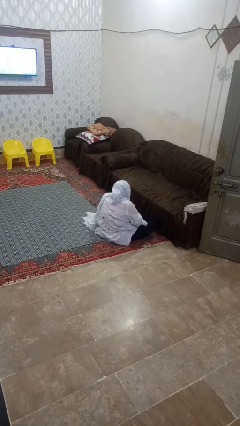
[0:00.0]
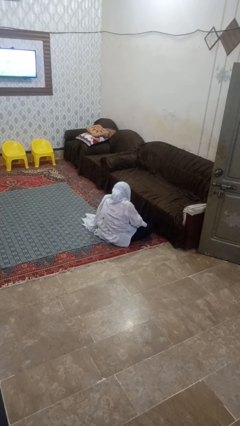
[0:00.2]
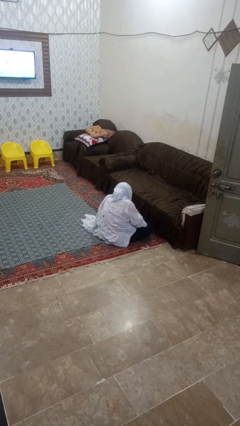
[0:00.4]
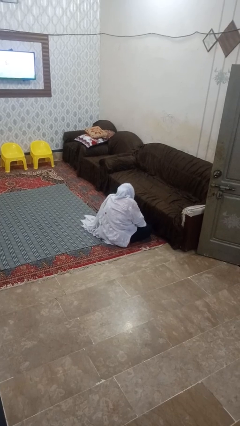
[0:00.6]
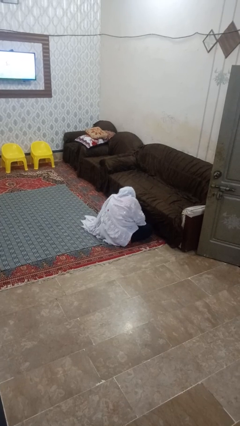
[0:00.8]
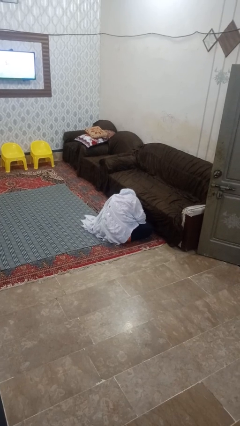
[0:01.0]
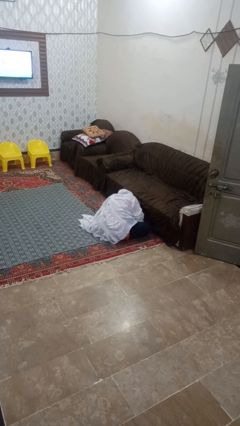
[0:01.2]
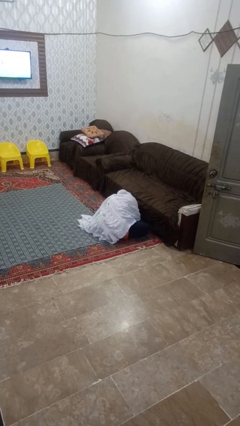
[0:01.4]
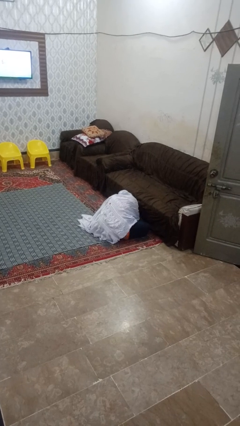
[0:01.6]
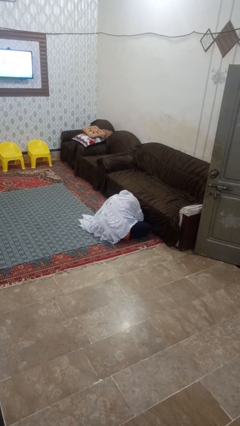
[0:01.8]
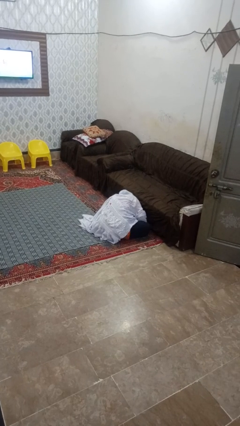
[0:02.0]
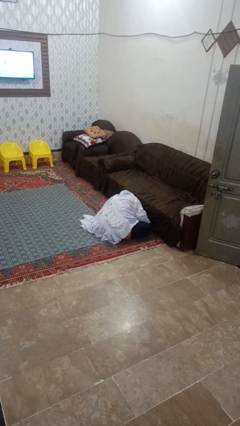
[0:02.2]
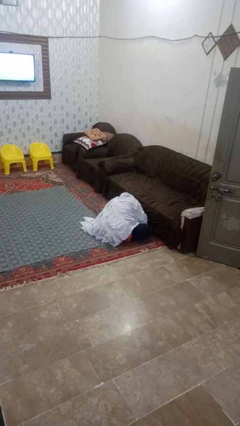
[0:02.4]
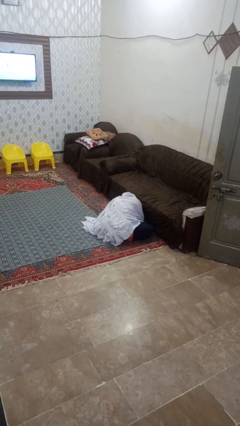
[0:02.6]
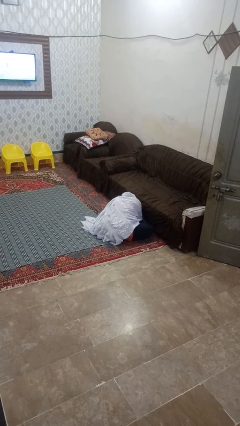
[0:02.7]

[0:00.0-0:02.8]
person searches under couch

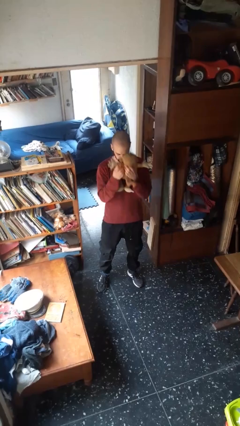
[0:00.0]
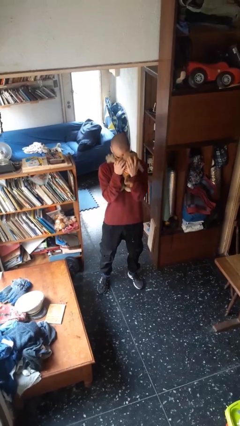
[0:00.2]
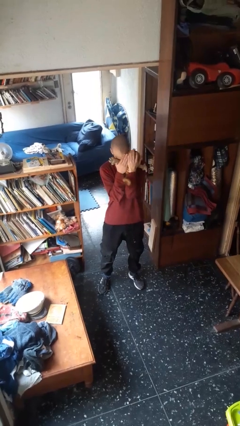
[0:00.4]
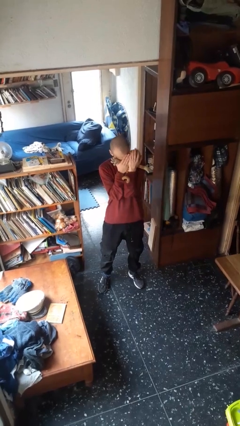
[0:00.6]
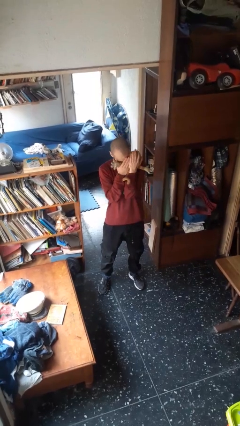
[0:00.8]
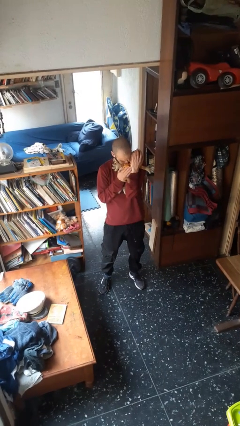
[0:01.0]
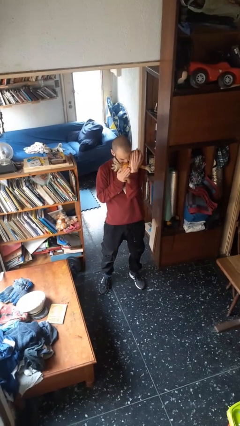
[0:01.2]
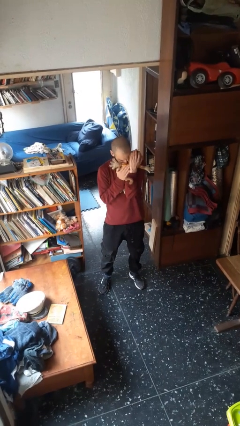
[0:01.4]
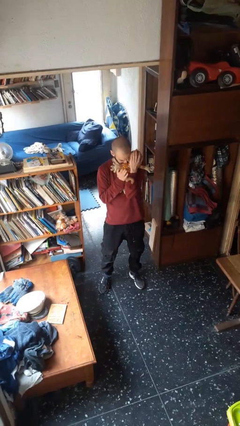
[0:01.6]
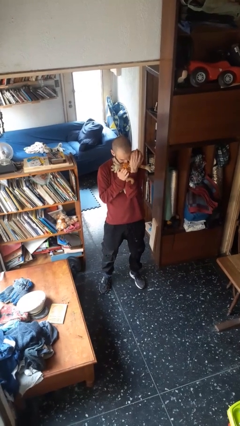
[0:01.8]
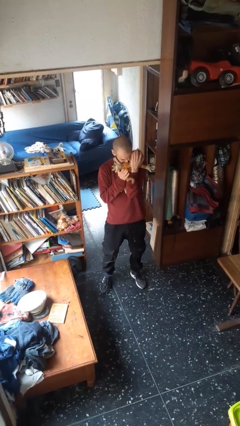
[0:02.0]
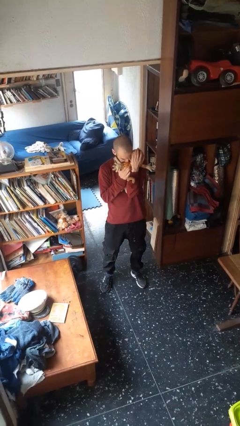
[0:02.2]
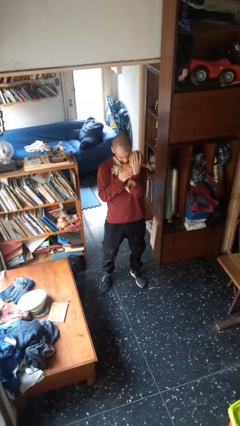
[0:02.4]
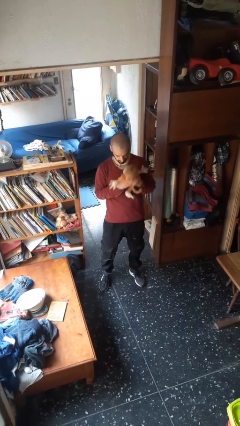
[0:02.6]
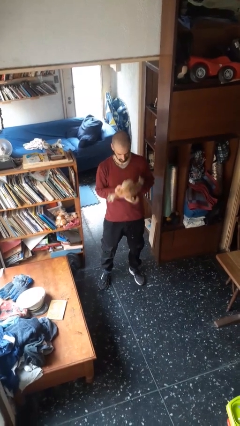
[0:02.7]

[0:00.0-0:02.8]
person hugs stuffed animal

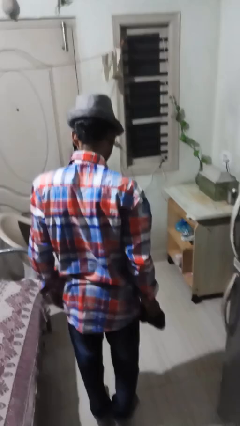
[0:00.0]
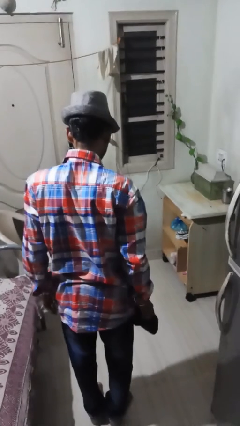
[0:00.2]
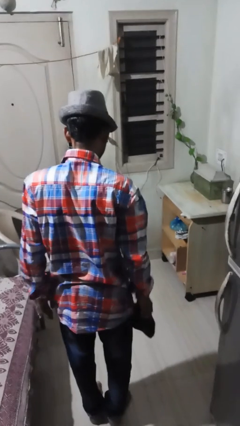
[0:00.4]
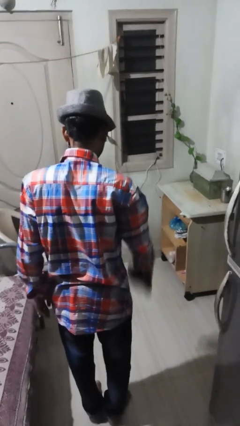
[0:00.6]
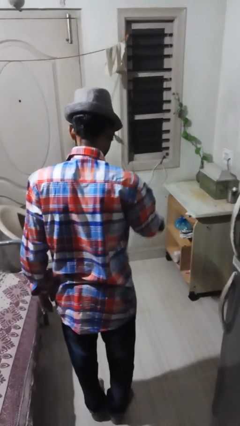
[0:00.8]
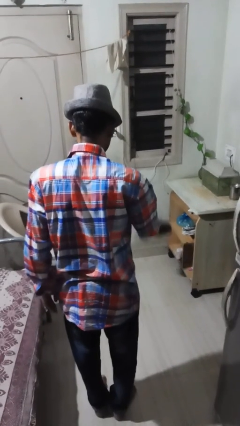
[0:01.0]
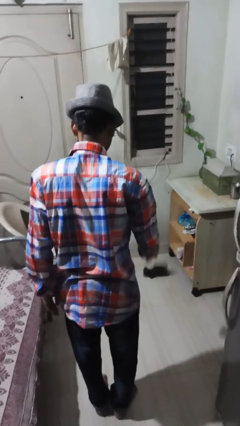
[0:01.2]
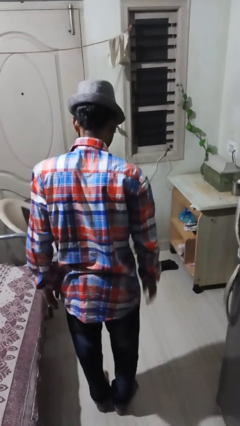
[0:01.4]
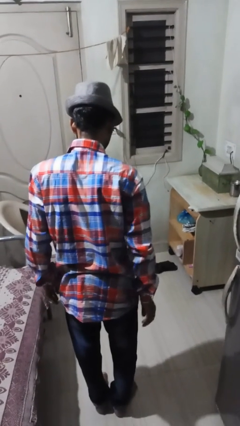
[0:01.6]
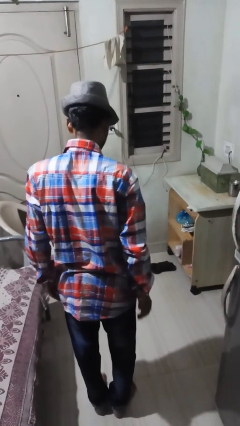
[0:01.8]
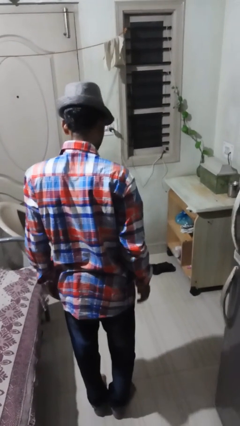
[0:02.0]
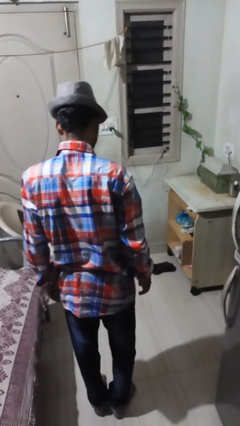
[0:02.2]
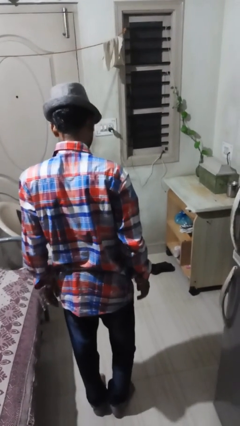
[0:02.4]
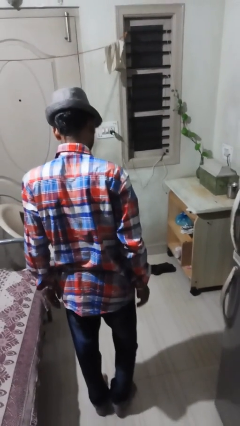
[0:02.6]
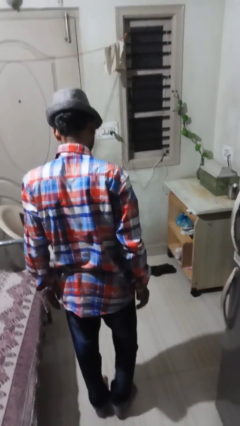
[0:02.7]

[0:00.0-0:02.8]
person throws object to ground

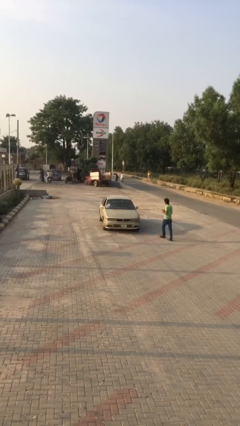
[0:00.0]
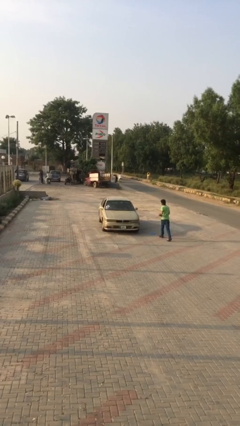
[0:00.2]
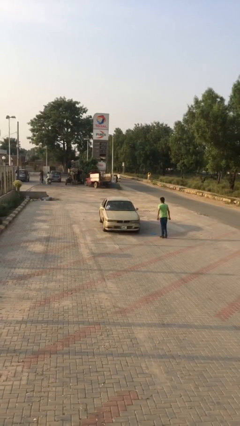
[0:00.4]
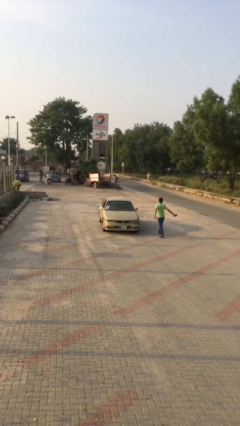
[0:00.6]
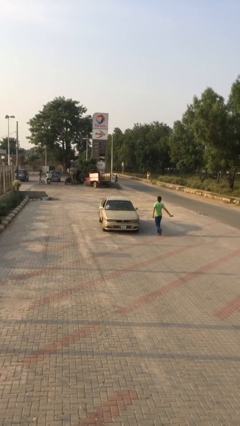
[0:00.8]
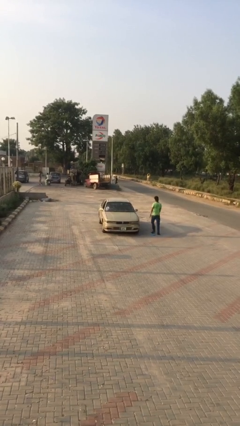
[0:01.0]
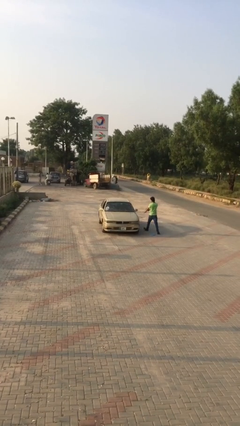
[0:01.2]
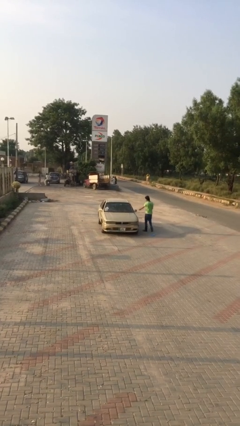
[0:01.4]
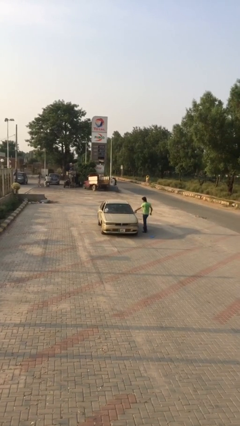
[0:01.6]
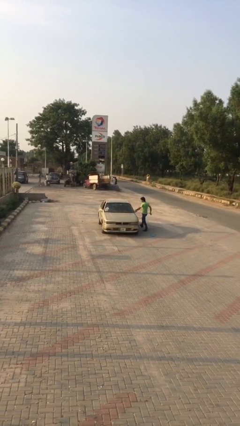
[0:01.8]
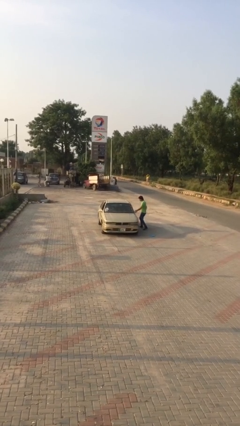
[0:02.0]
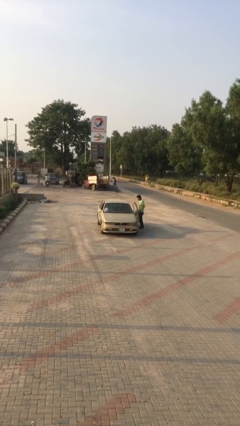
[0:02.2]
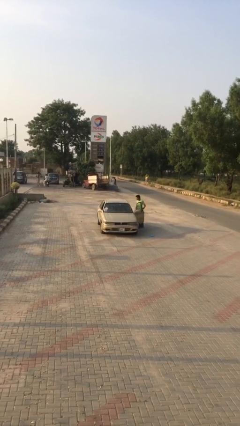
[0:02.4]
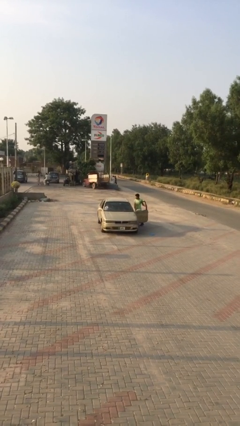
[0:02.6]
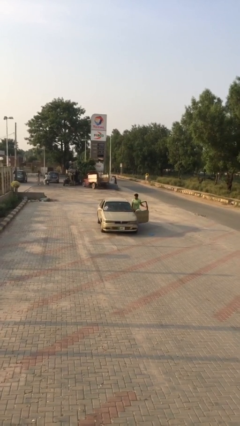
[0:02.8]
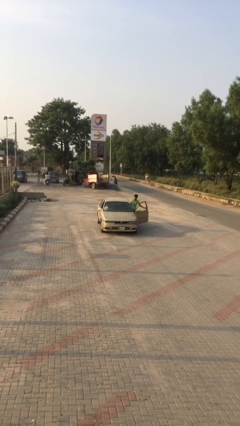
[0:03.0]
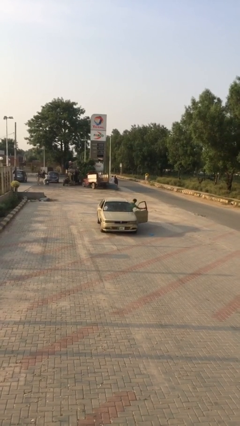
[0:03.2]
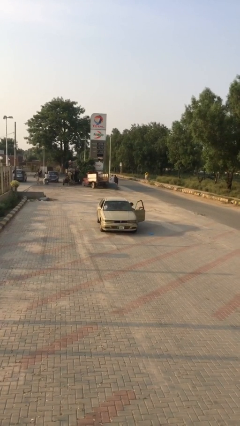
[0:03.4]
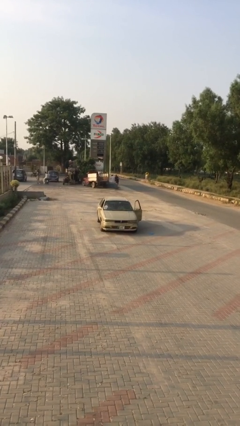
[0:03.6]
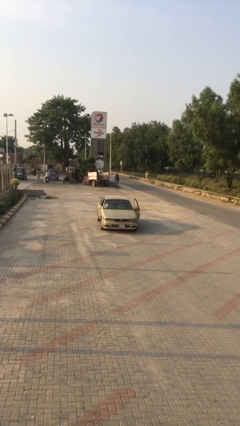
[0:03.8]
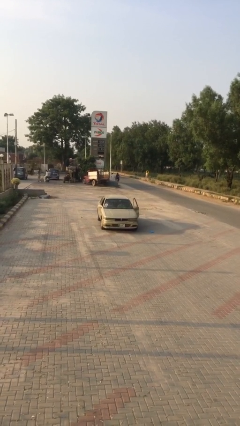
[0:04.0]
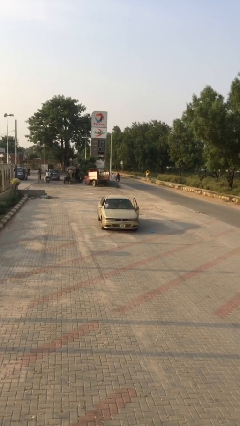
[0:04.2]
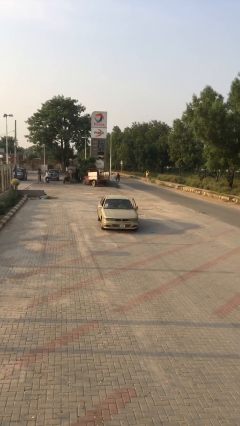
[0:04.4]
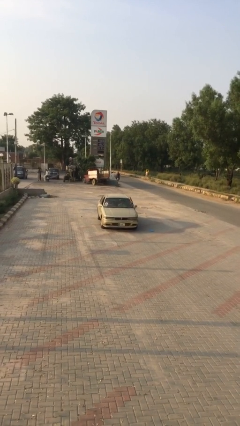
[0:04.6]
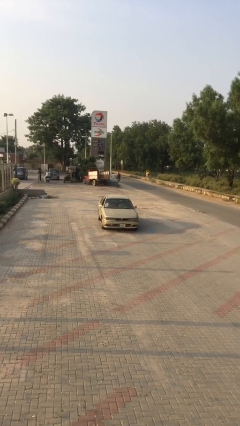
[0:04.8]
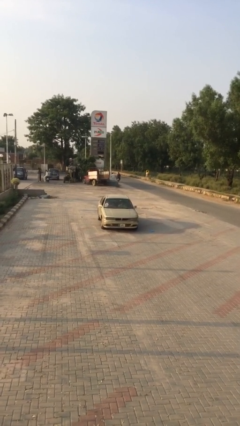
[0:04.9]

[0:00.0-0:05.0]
car picks up person

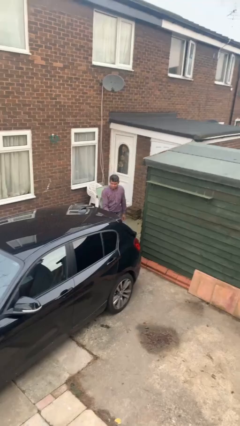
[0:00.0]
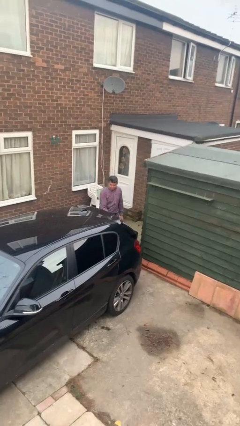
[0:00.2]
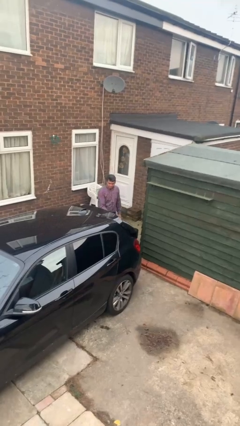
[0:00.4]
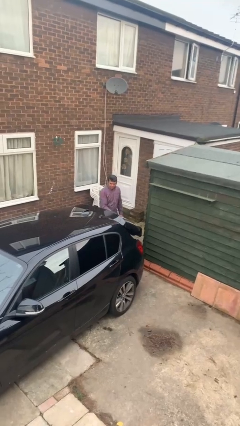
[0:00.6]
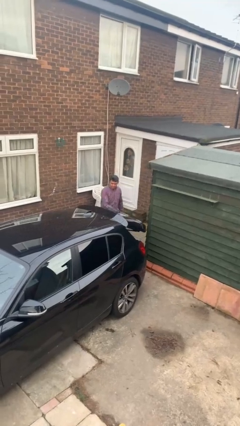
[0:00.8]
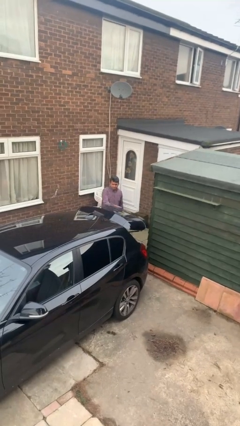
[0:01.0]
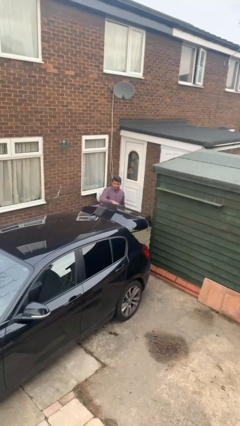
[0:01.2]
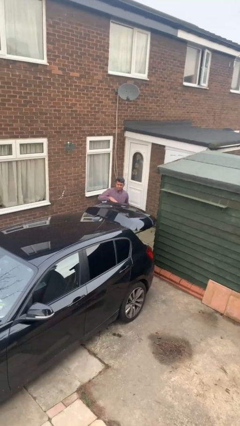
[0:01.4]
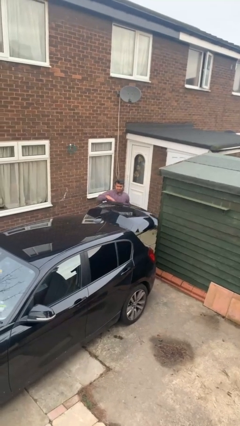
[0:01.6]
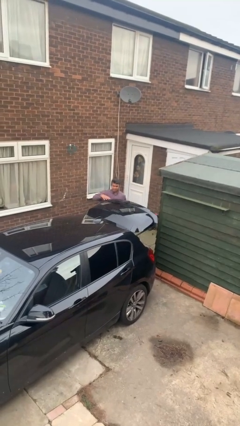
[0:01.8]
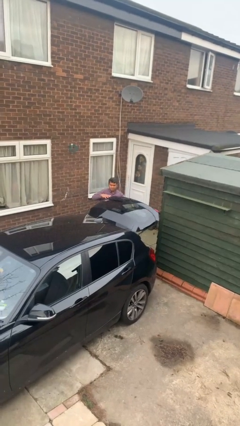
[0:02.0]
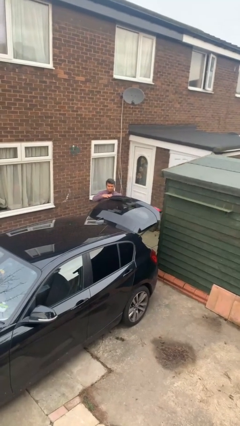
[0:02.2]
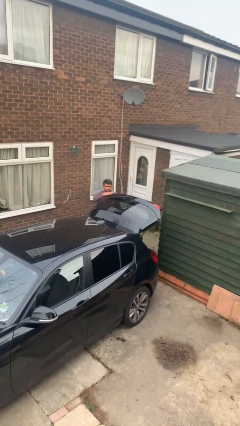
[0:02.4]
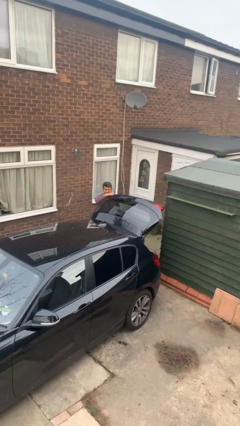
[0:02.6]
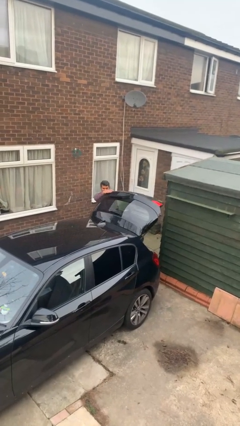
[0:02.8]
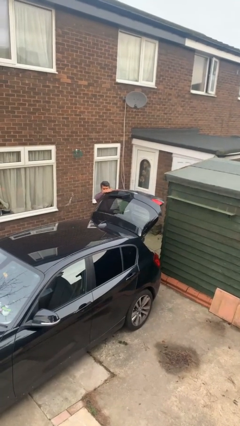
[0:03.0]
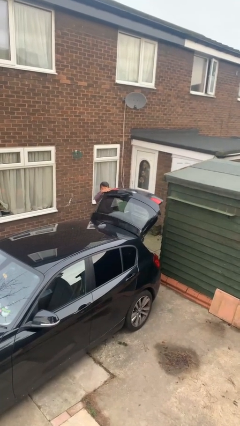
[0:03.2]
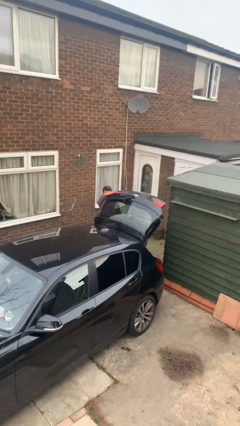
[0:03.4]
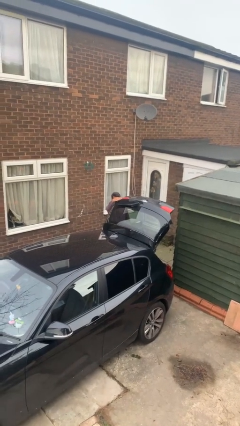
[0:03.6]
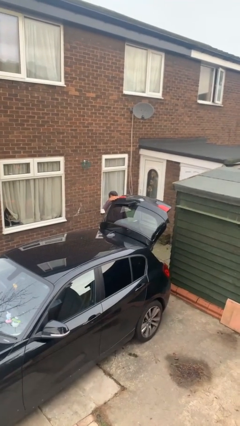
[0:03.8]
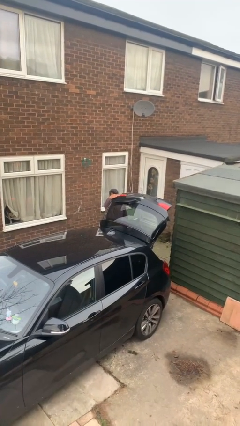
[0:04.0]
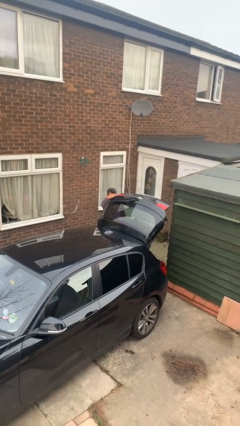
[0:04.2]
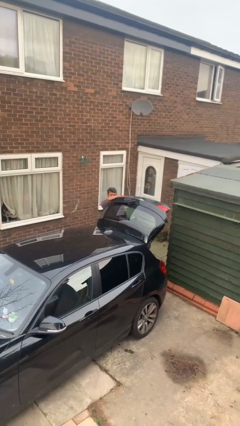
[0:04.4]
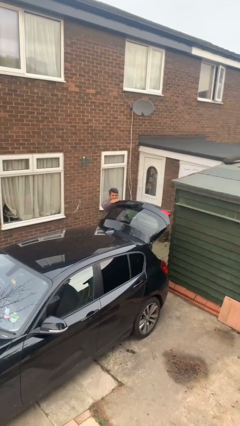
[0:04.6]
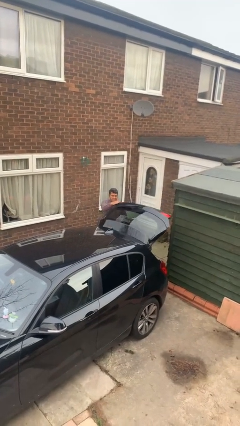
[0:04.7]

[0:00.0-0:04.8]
person opens car trunk
